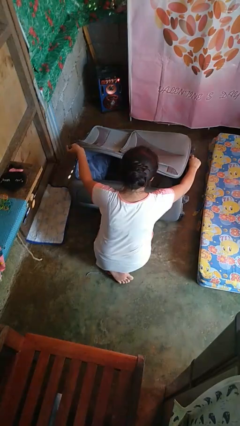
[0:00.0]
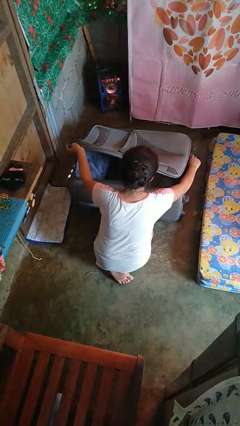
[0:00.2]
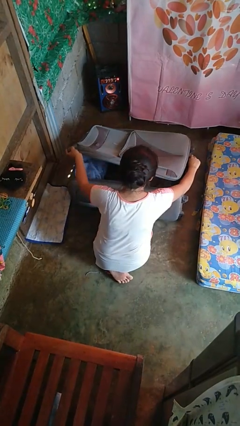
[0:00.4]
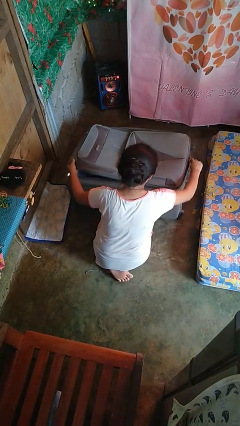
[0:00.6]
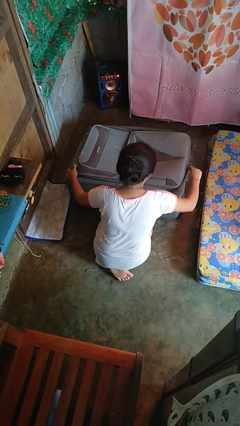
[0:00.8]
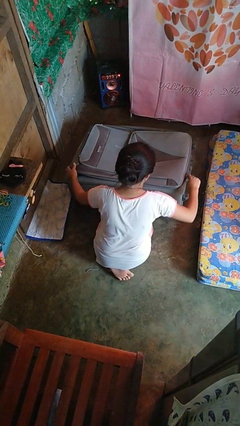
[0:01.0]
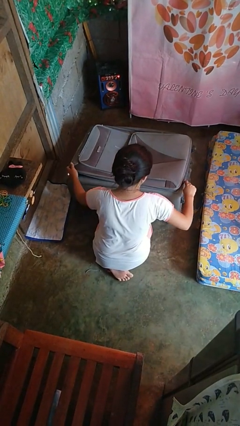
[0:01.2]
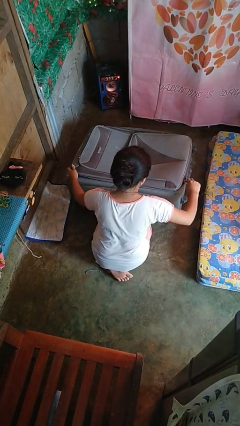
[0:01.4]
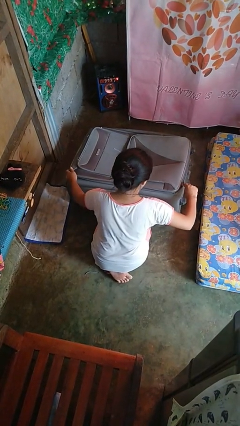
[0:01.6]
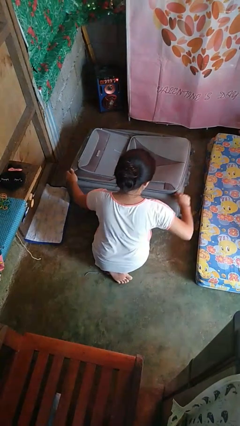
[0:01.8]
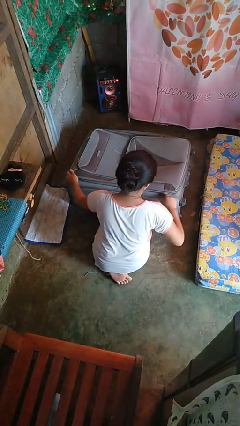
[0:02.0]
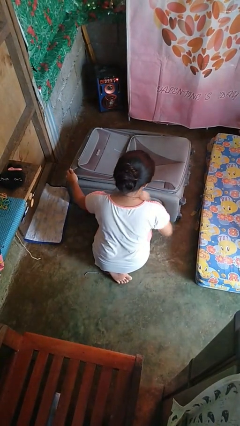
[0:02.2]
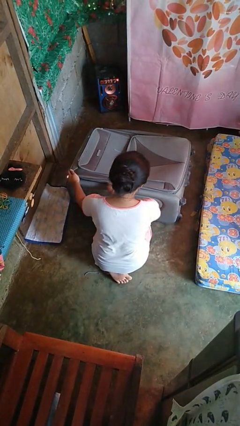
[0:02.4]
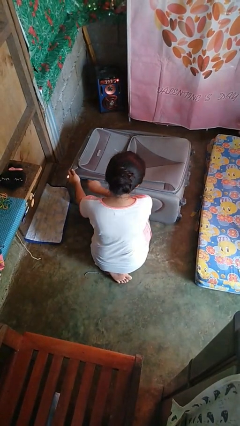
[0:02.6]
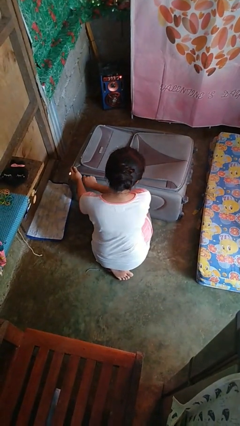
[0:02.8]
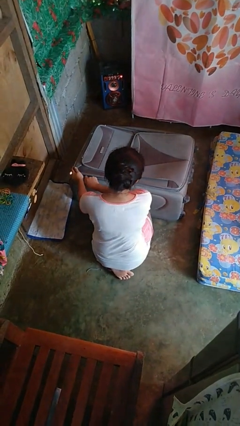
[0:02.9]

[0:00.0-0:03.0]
person closes suitcase

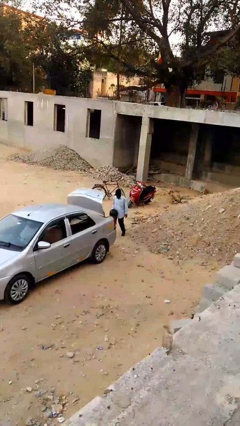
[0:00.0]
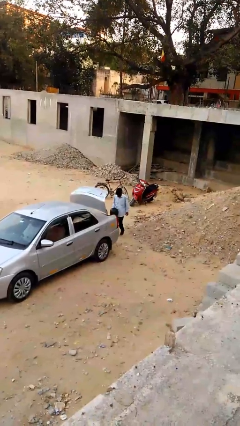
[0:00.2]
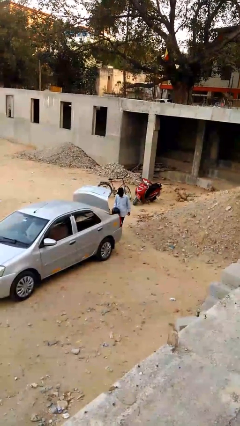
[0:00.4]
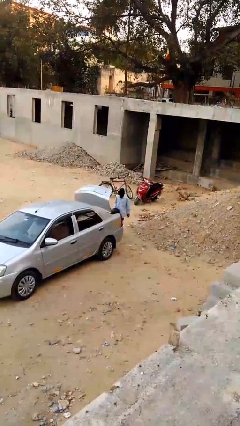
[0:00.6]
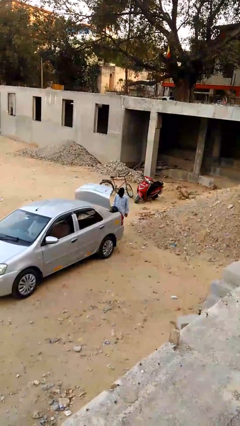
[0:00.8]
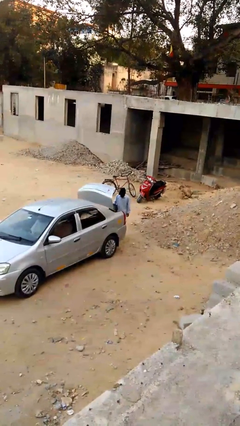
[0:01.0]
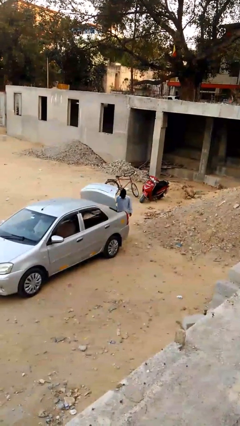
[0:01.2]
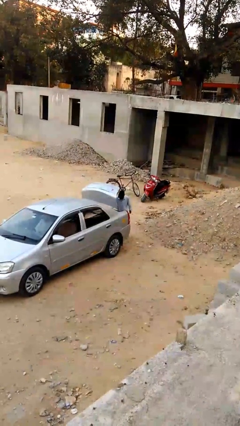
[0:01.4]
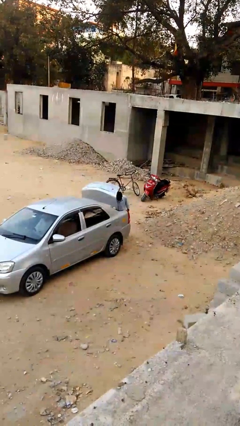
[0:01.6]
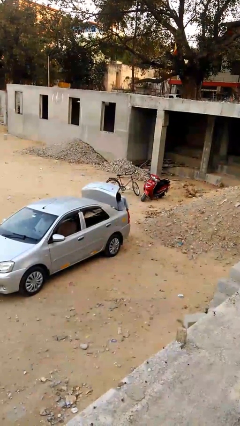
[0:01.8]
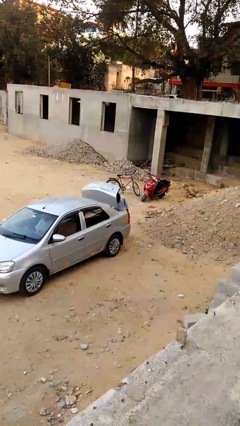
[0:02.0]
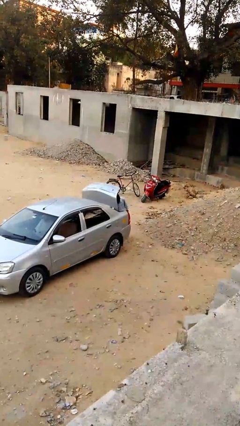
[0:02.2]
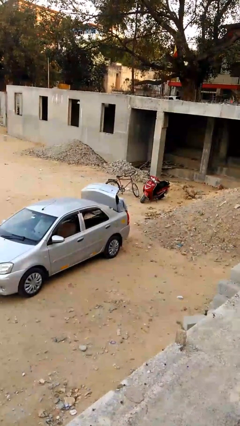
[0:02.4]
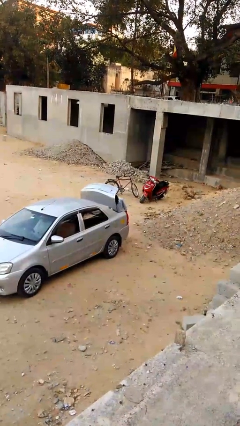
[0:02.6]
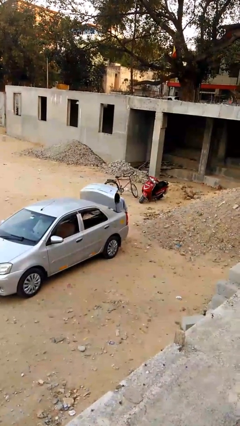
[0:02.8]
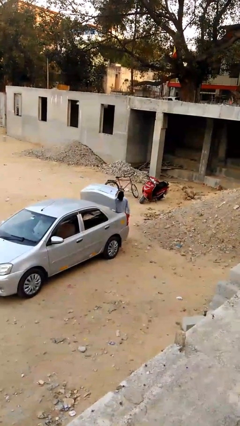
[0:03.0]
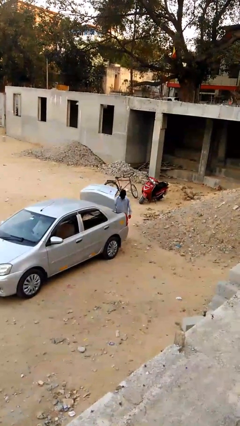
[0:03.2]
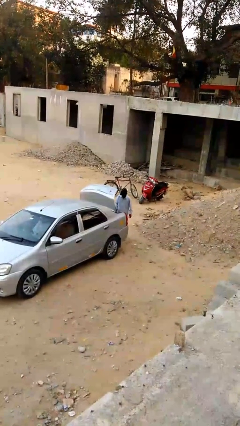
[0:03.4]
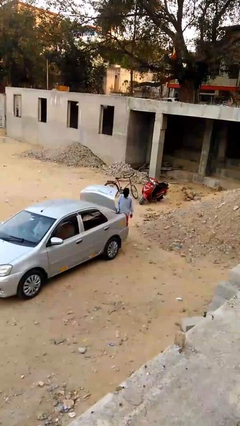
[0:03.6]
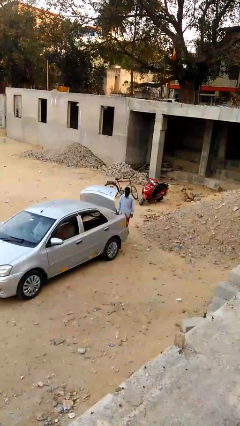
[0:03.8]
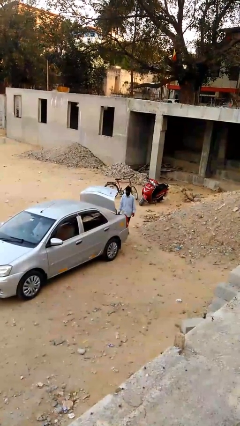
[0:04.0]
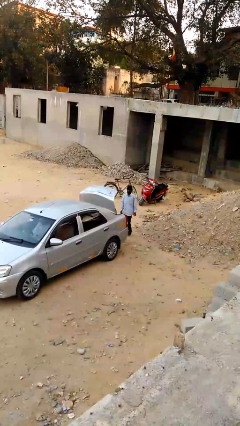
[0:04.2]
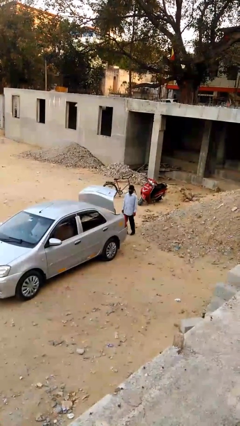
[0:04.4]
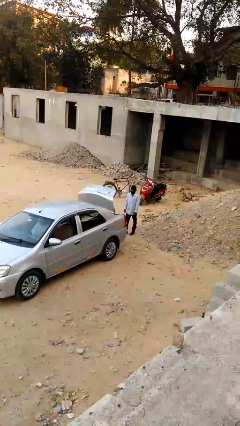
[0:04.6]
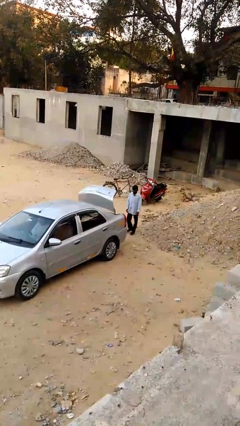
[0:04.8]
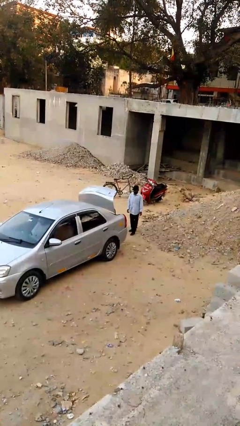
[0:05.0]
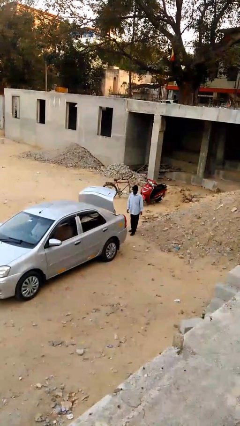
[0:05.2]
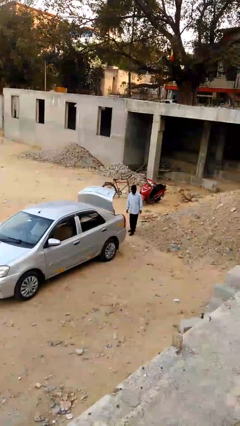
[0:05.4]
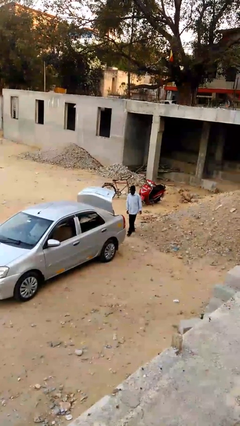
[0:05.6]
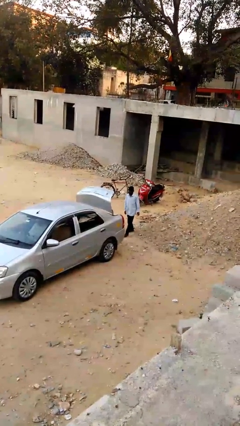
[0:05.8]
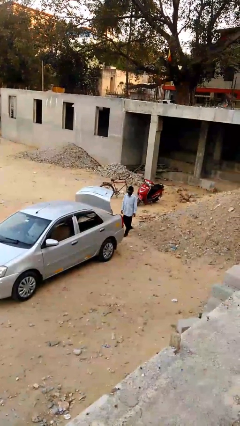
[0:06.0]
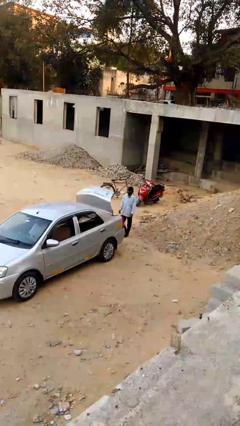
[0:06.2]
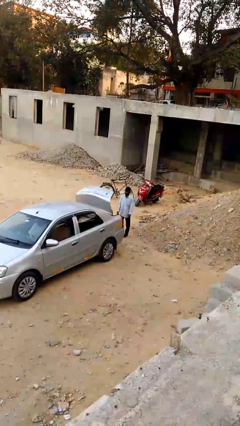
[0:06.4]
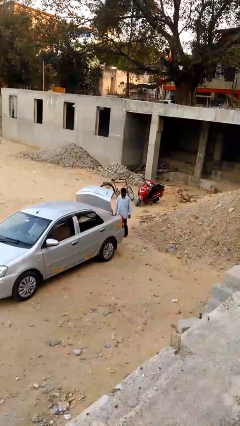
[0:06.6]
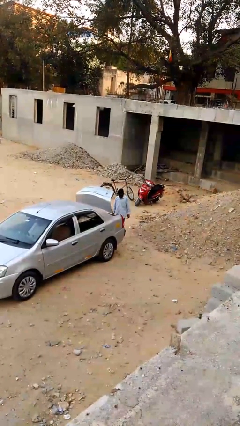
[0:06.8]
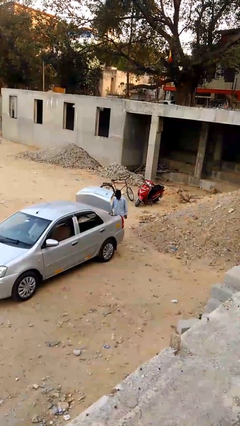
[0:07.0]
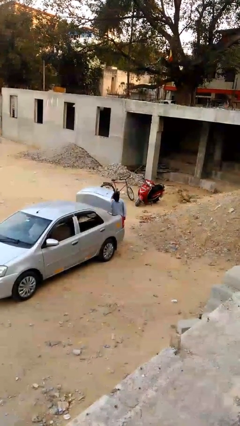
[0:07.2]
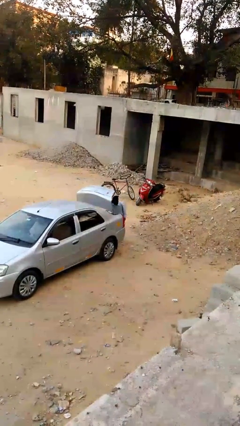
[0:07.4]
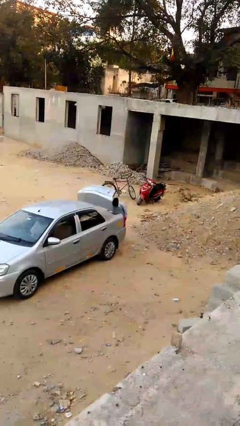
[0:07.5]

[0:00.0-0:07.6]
person loads car

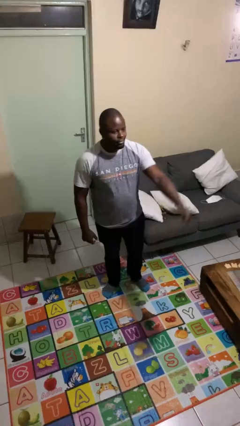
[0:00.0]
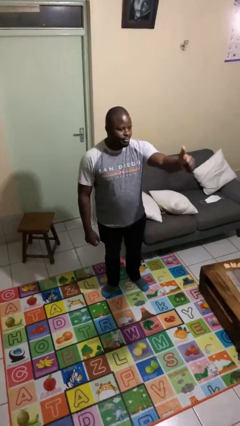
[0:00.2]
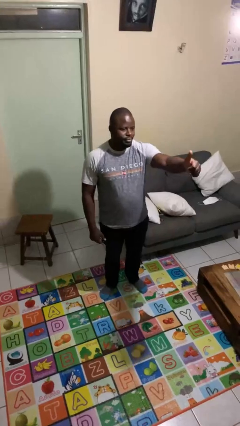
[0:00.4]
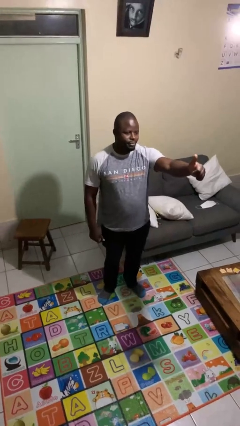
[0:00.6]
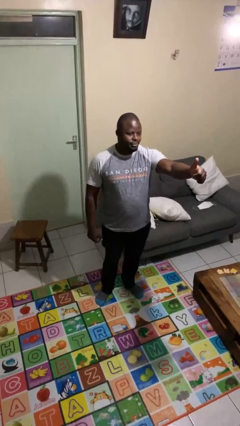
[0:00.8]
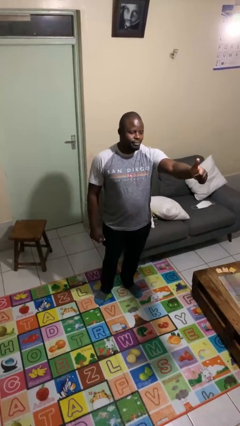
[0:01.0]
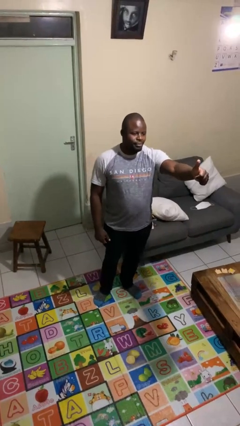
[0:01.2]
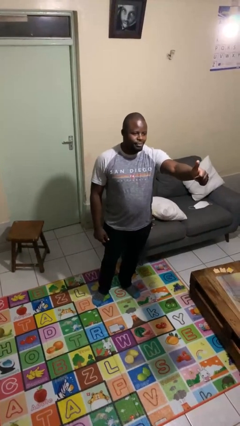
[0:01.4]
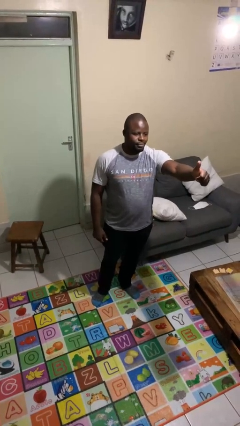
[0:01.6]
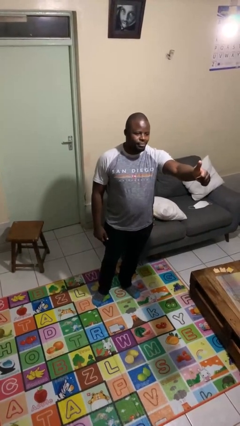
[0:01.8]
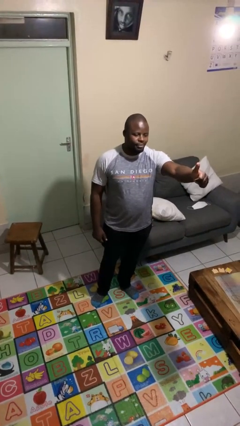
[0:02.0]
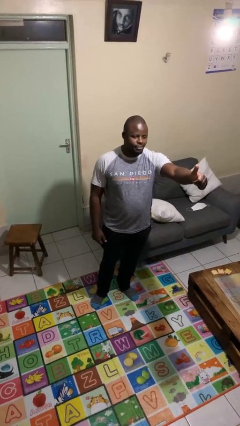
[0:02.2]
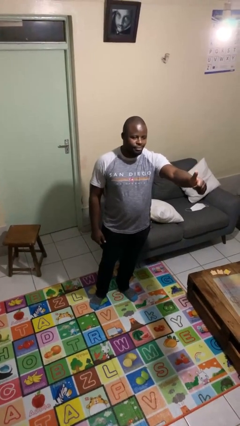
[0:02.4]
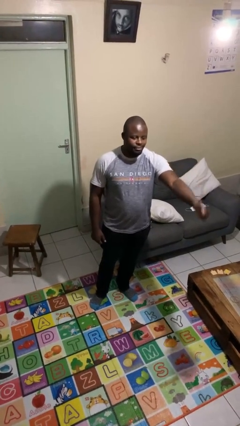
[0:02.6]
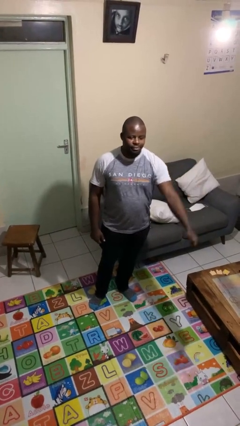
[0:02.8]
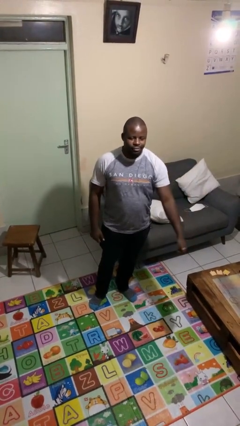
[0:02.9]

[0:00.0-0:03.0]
person gestures thumbs up

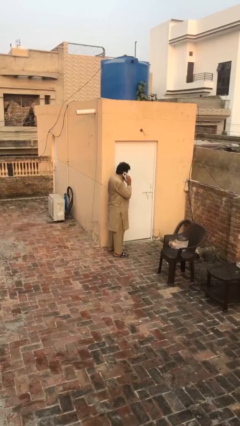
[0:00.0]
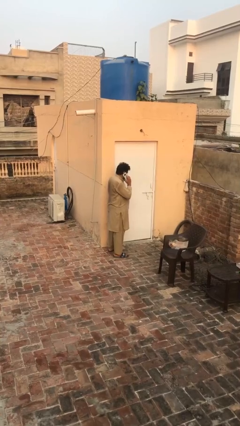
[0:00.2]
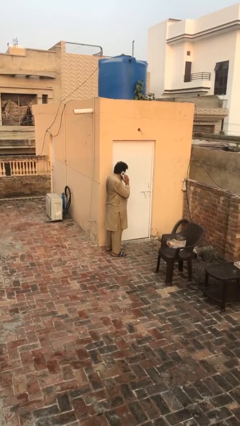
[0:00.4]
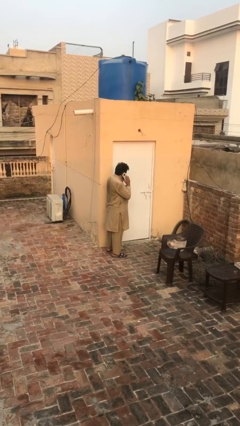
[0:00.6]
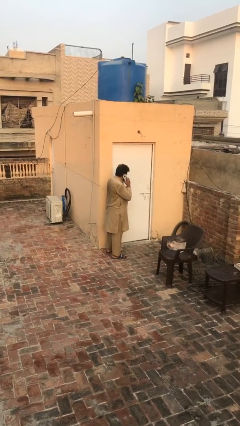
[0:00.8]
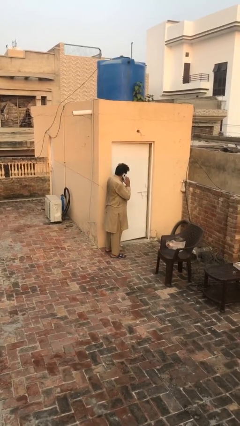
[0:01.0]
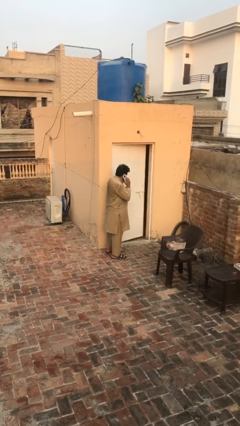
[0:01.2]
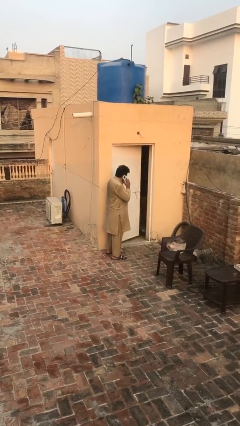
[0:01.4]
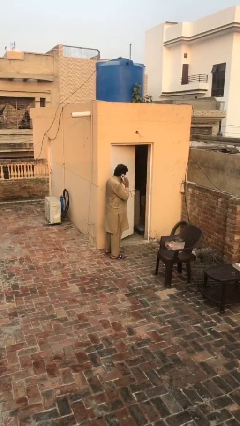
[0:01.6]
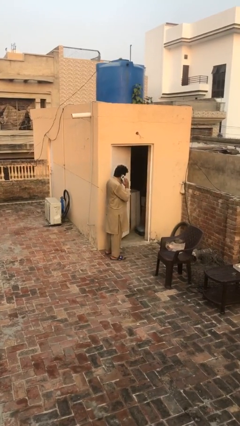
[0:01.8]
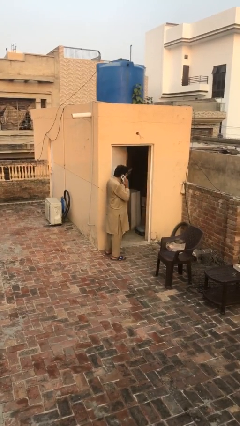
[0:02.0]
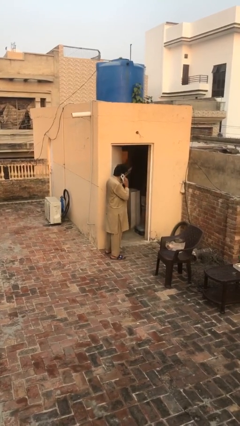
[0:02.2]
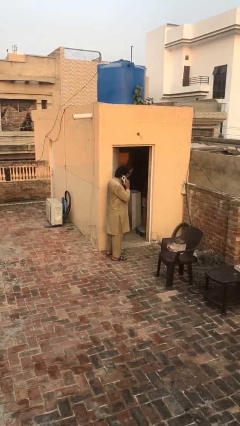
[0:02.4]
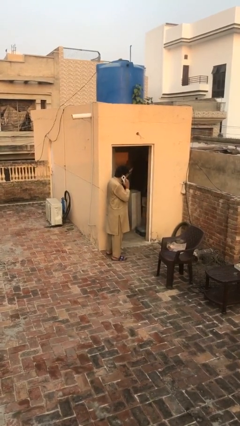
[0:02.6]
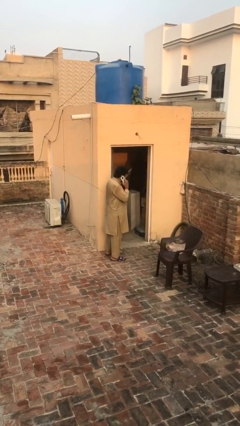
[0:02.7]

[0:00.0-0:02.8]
person opens facility door

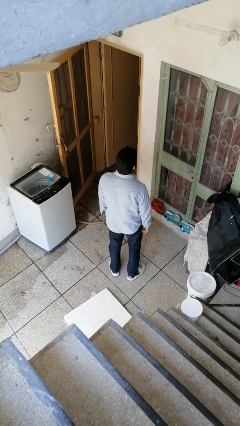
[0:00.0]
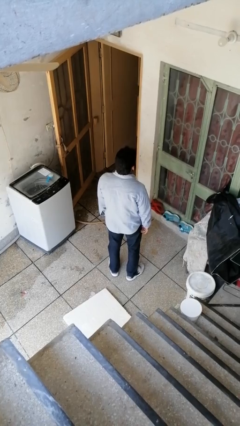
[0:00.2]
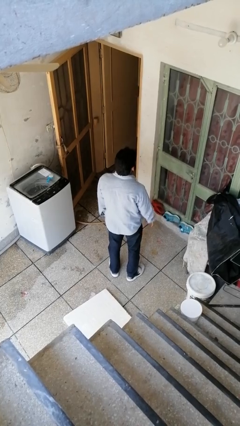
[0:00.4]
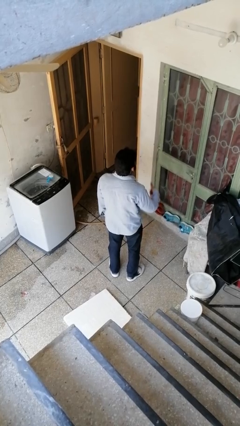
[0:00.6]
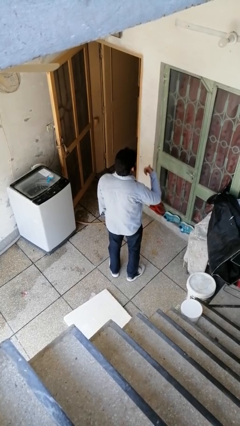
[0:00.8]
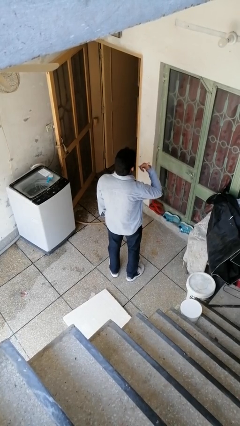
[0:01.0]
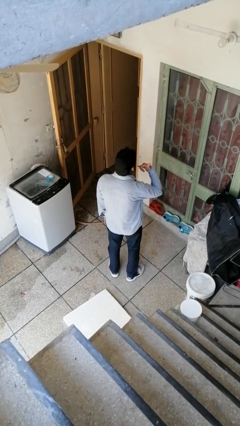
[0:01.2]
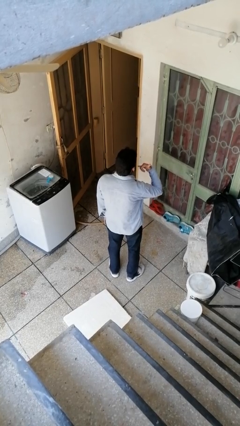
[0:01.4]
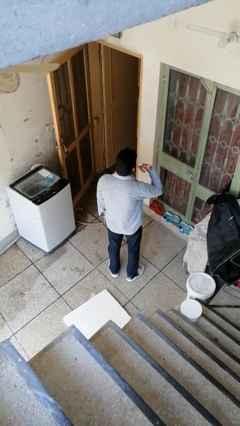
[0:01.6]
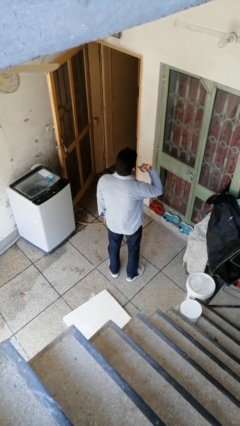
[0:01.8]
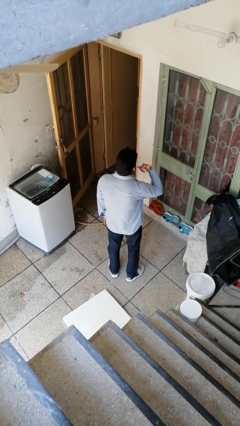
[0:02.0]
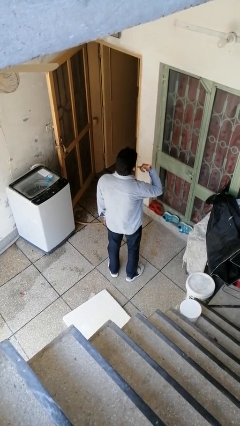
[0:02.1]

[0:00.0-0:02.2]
person gestures call me
